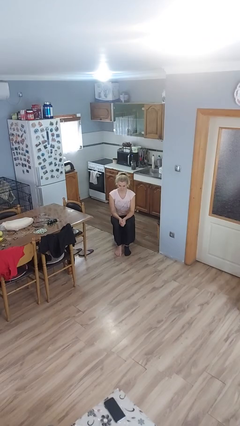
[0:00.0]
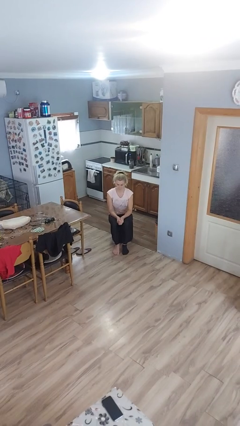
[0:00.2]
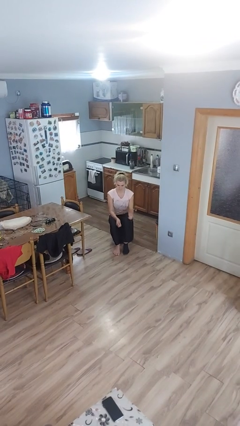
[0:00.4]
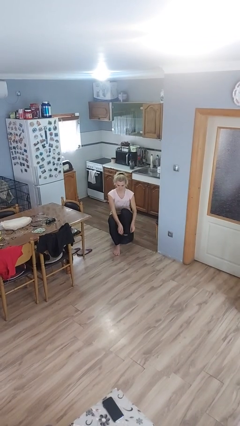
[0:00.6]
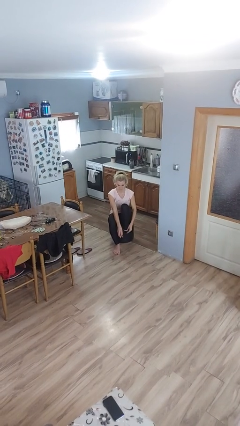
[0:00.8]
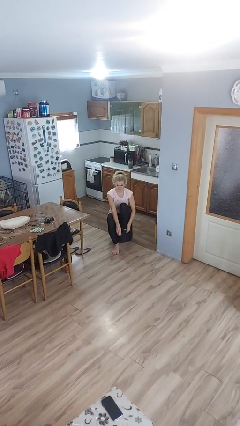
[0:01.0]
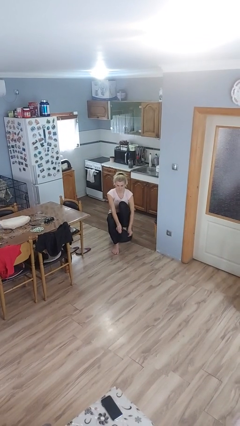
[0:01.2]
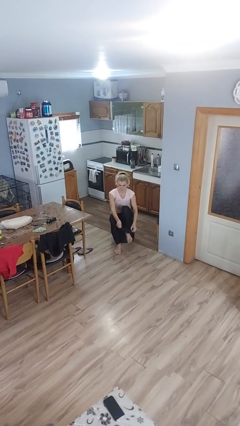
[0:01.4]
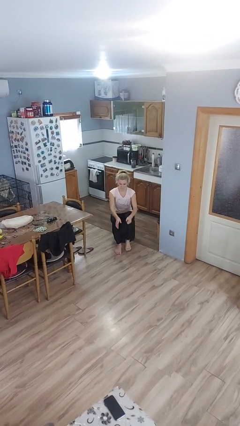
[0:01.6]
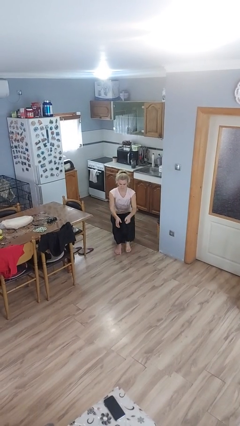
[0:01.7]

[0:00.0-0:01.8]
person takes off socks

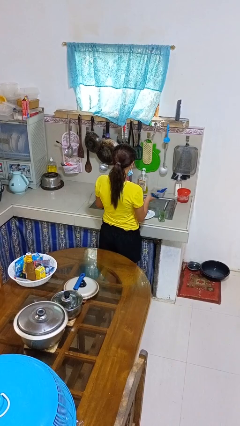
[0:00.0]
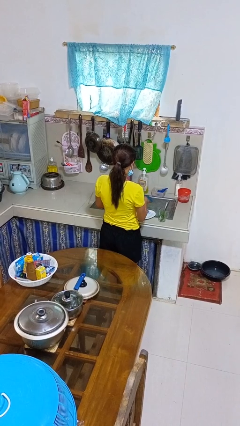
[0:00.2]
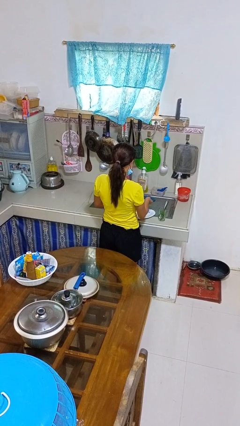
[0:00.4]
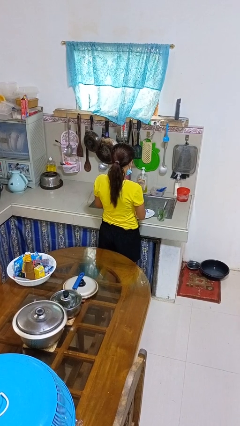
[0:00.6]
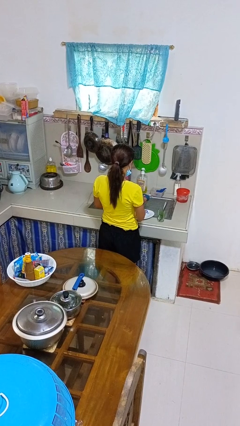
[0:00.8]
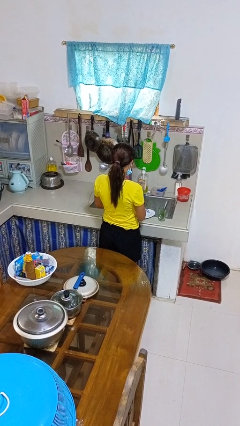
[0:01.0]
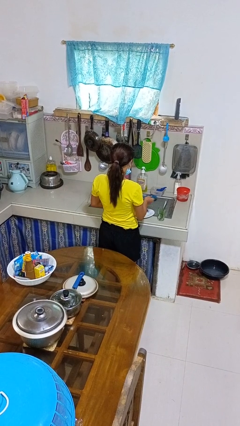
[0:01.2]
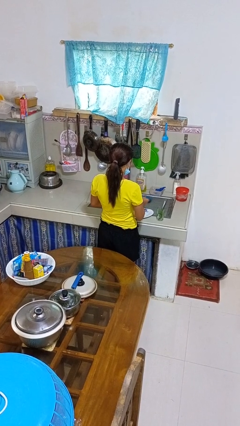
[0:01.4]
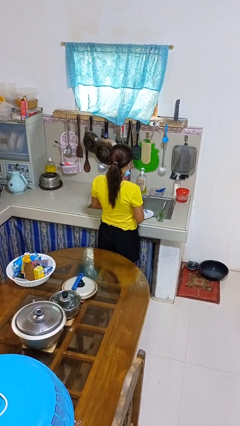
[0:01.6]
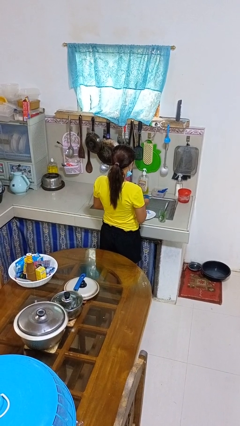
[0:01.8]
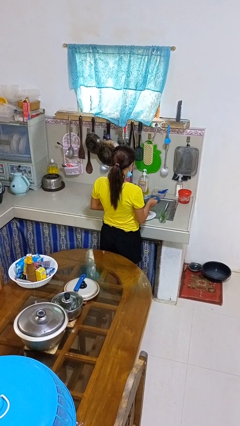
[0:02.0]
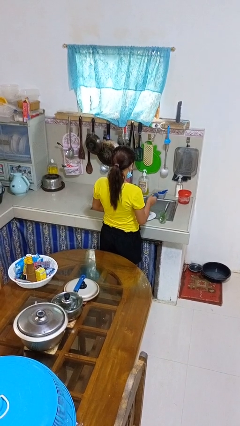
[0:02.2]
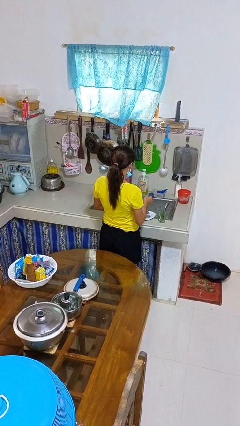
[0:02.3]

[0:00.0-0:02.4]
person dries dish

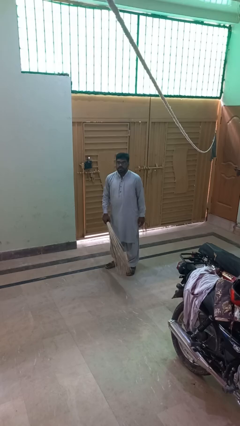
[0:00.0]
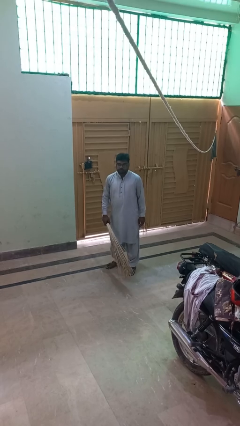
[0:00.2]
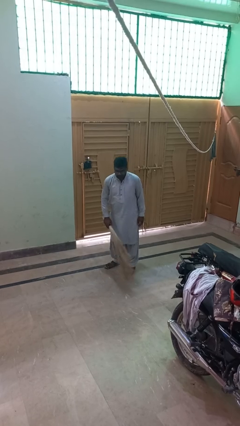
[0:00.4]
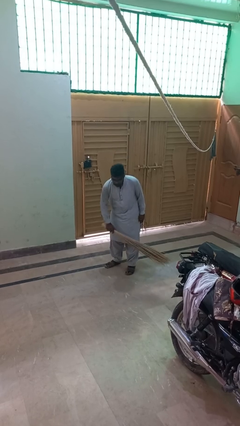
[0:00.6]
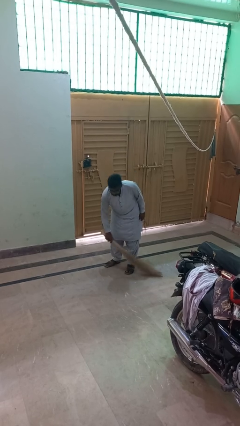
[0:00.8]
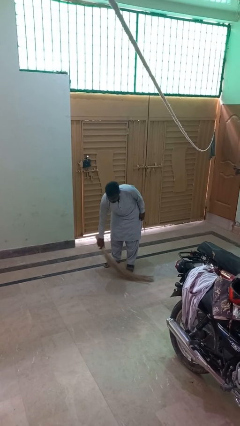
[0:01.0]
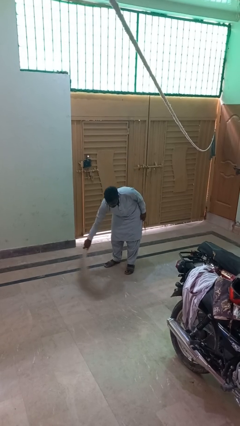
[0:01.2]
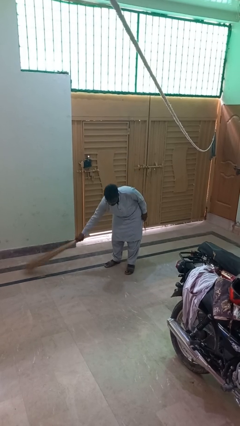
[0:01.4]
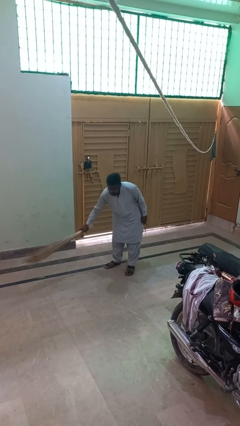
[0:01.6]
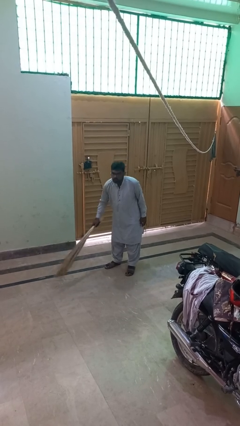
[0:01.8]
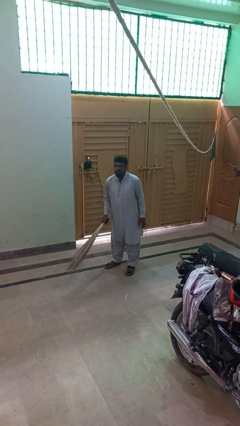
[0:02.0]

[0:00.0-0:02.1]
person sweeps floor

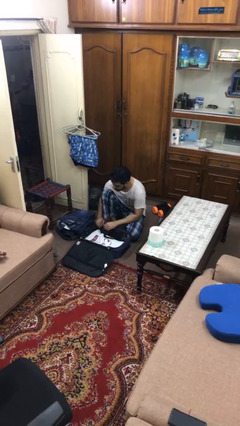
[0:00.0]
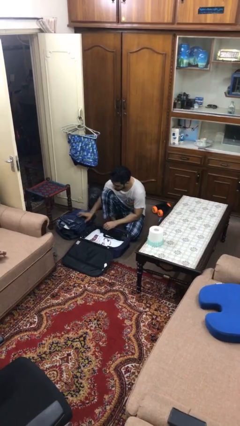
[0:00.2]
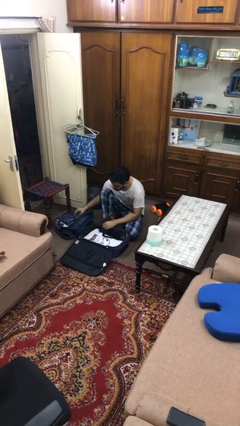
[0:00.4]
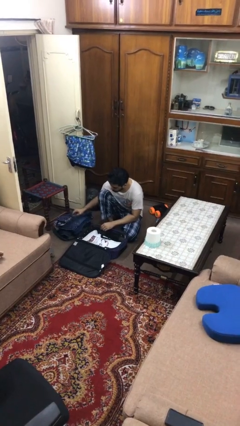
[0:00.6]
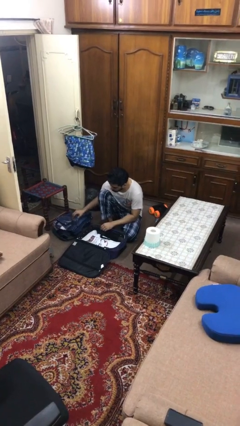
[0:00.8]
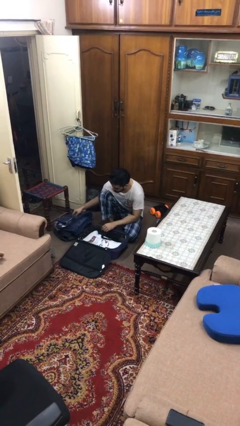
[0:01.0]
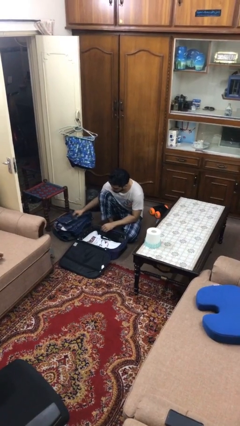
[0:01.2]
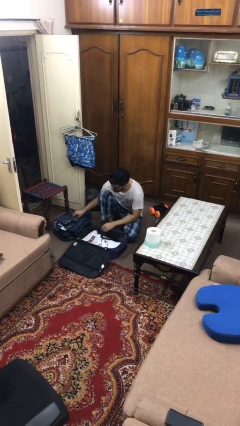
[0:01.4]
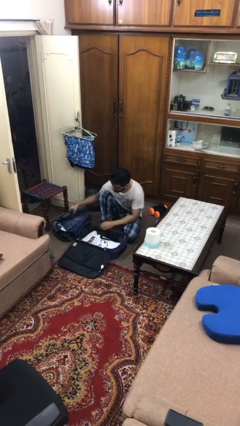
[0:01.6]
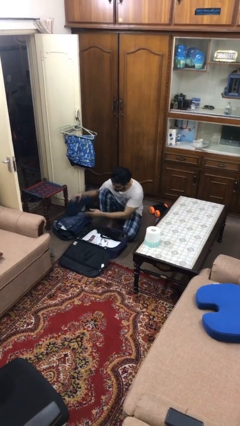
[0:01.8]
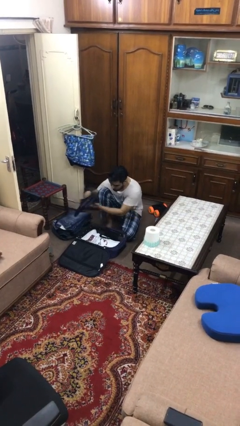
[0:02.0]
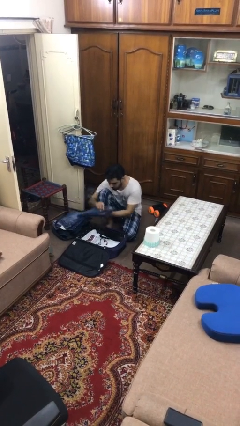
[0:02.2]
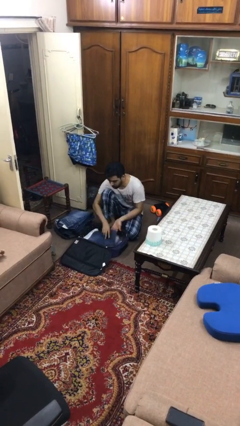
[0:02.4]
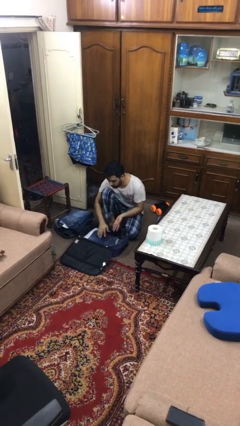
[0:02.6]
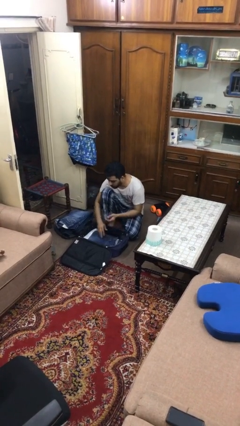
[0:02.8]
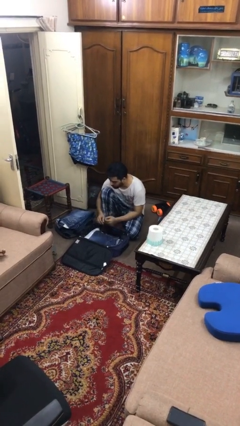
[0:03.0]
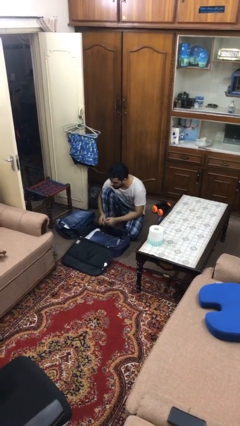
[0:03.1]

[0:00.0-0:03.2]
person loads clothes into suitcase

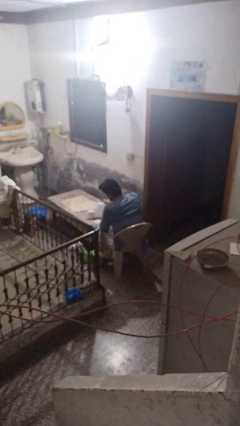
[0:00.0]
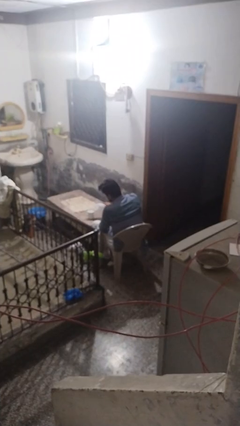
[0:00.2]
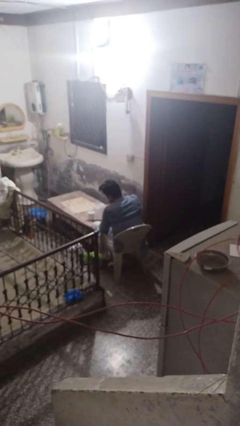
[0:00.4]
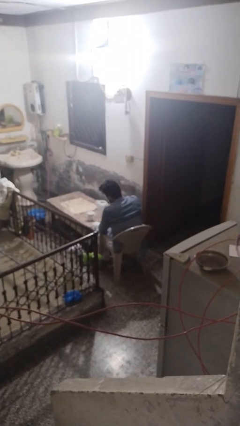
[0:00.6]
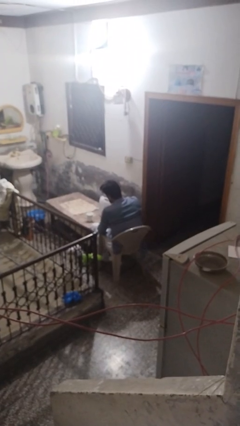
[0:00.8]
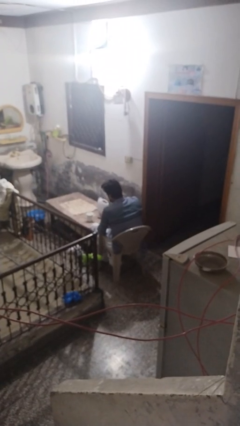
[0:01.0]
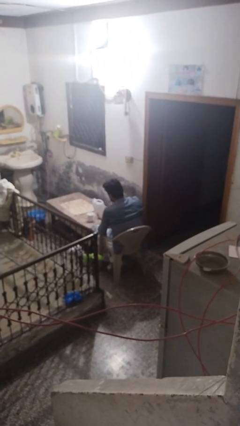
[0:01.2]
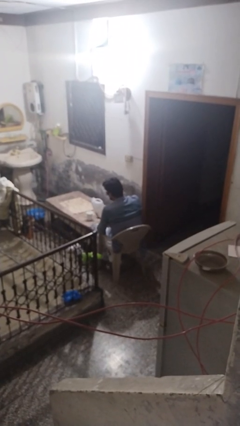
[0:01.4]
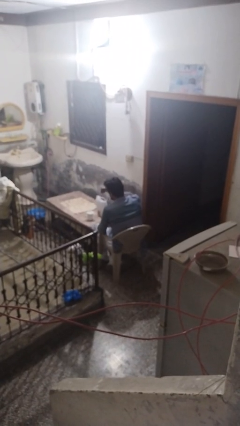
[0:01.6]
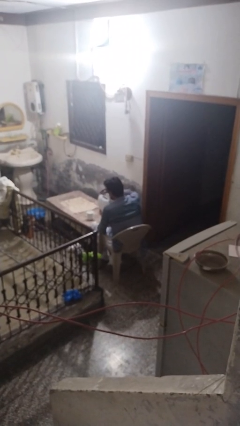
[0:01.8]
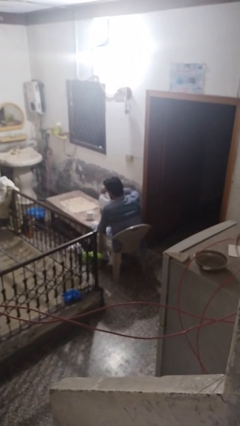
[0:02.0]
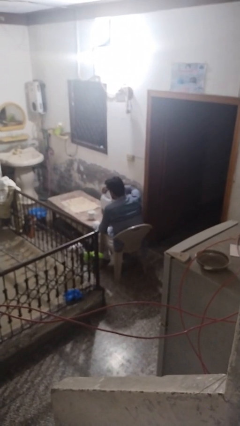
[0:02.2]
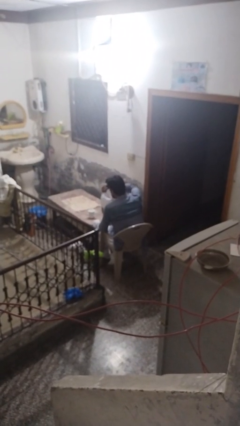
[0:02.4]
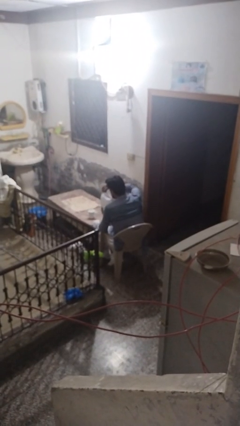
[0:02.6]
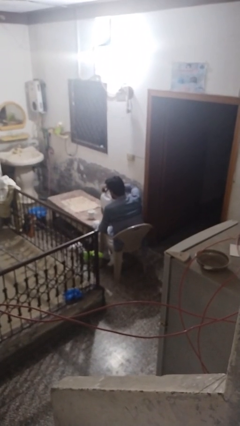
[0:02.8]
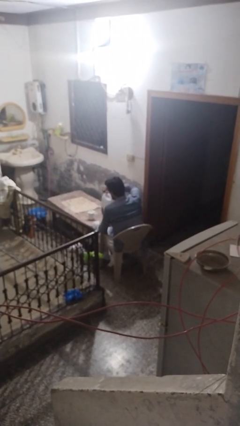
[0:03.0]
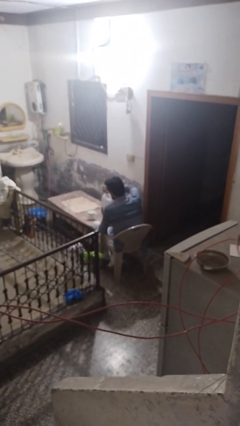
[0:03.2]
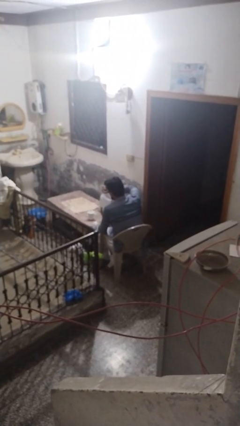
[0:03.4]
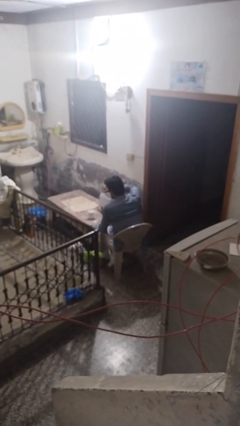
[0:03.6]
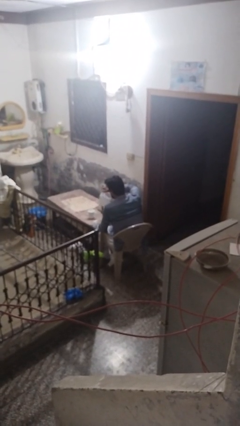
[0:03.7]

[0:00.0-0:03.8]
person screws lid to bottle

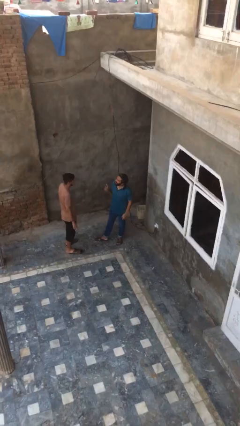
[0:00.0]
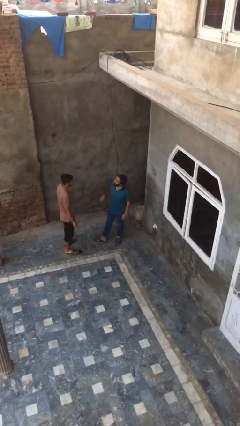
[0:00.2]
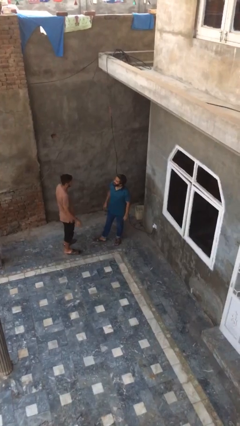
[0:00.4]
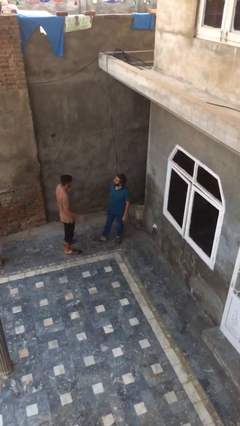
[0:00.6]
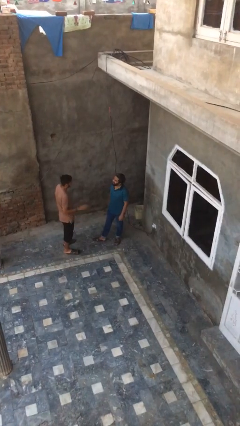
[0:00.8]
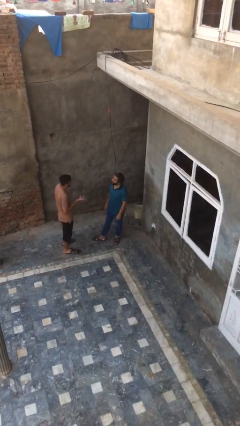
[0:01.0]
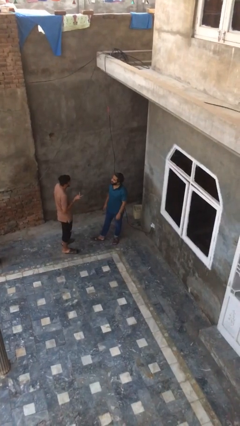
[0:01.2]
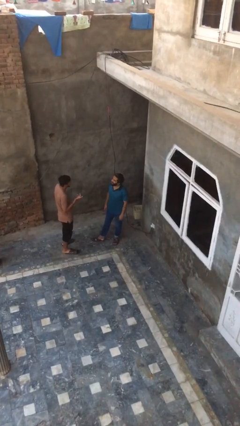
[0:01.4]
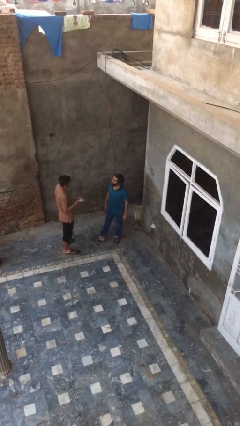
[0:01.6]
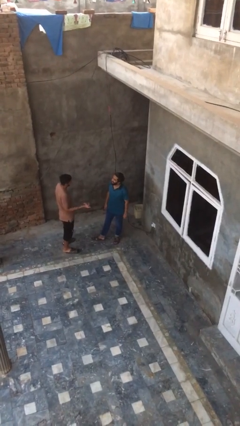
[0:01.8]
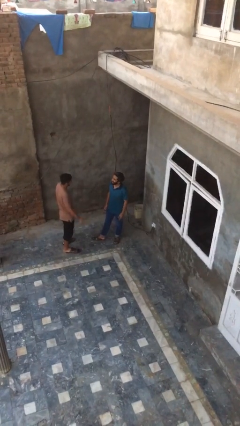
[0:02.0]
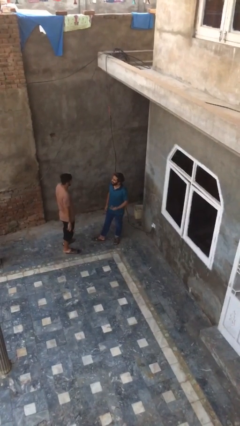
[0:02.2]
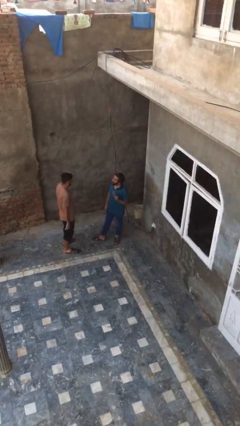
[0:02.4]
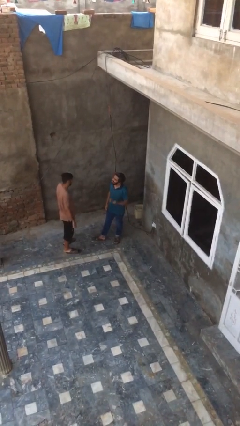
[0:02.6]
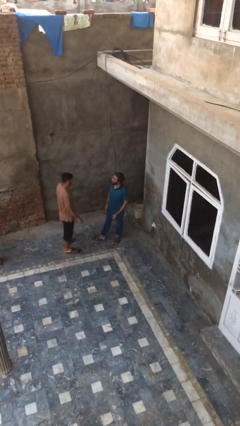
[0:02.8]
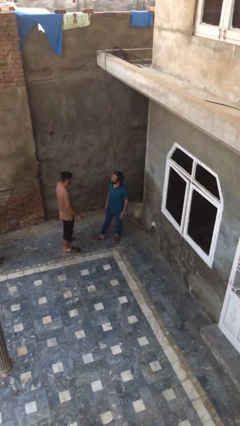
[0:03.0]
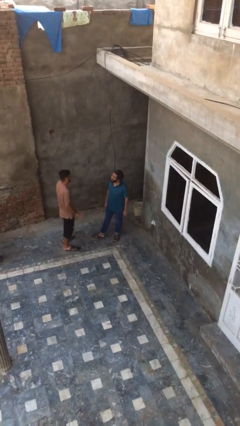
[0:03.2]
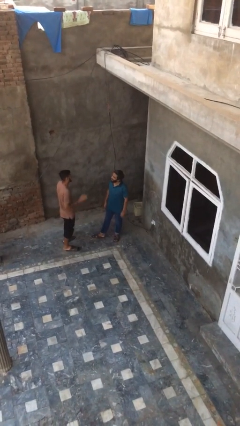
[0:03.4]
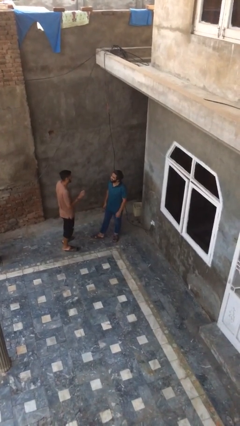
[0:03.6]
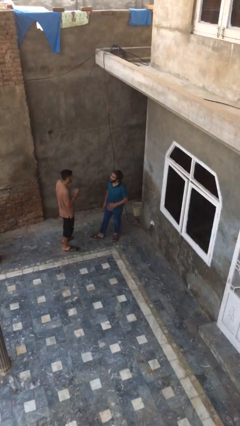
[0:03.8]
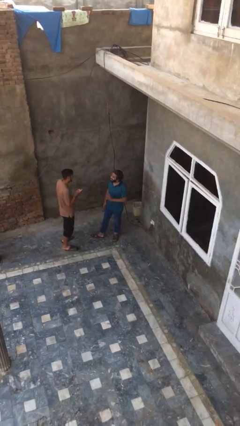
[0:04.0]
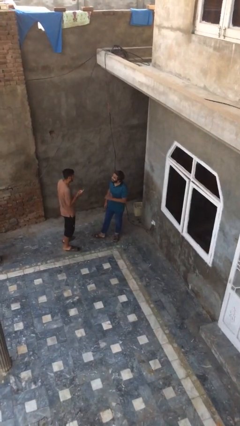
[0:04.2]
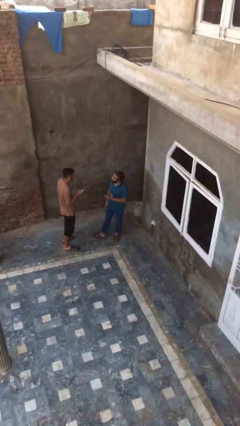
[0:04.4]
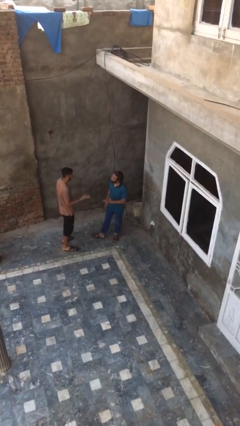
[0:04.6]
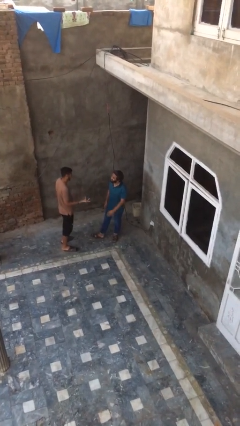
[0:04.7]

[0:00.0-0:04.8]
person talks to person
